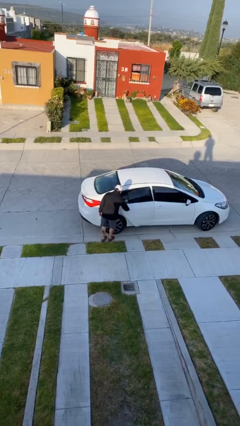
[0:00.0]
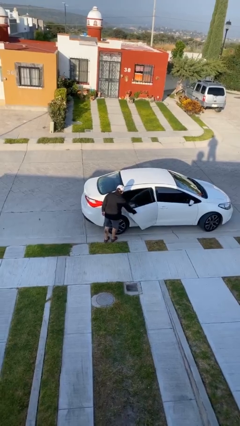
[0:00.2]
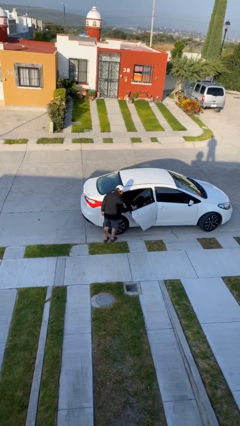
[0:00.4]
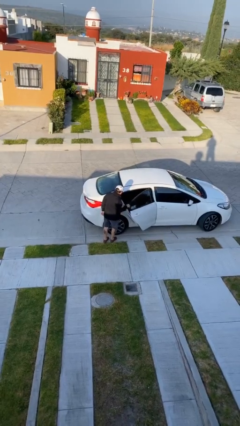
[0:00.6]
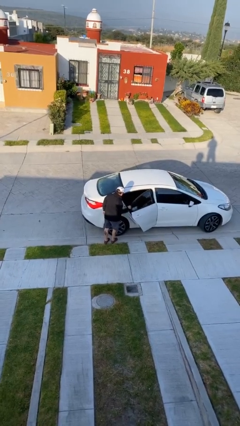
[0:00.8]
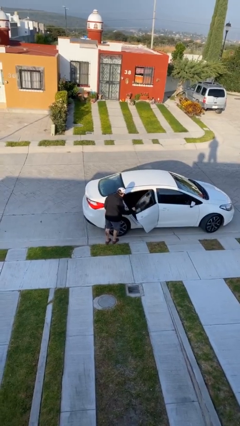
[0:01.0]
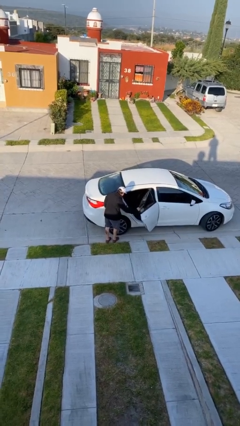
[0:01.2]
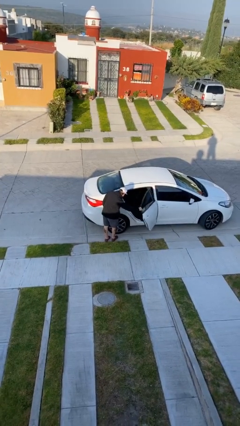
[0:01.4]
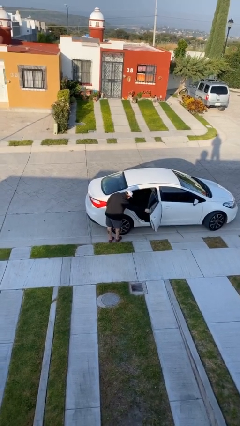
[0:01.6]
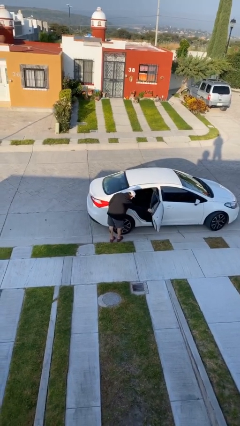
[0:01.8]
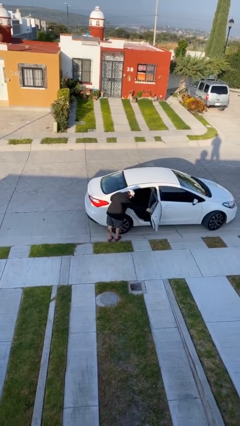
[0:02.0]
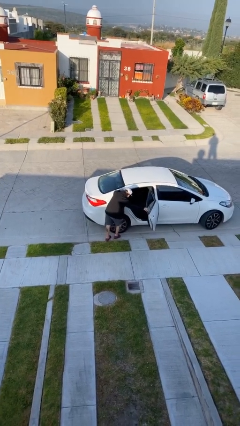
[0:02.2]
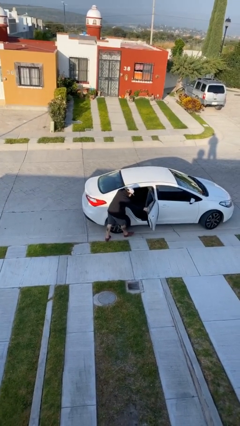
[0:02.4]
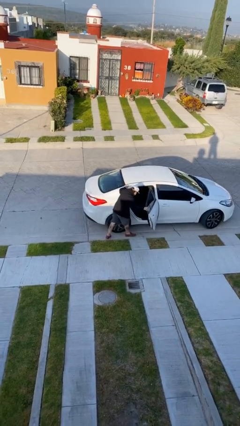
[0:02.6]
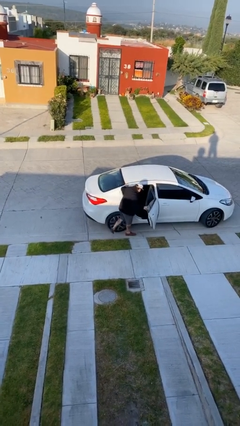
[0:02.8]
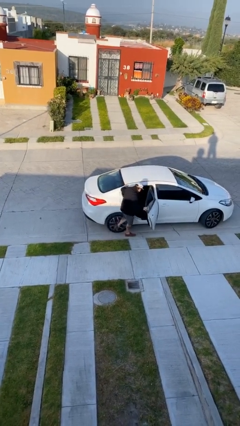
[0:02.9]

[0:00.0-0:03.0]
person opens car door

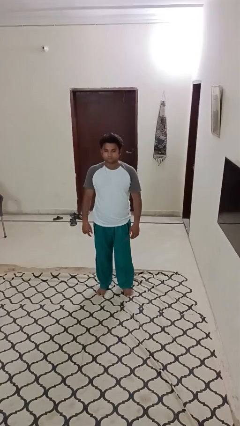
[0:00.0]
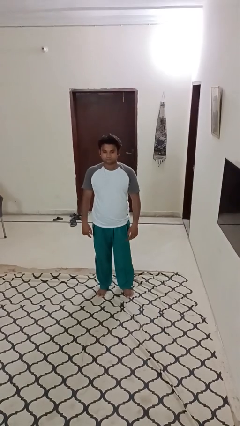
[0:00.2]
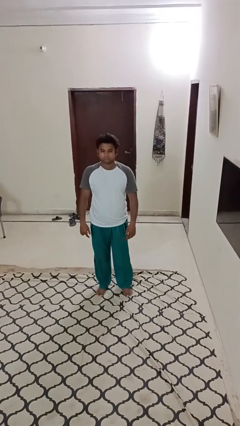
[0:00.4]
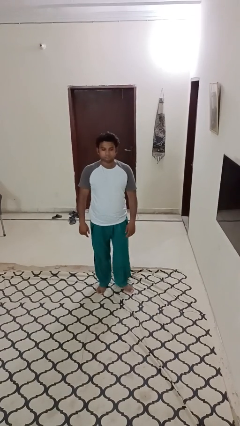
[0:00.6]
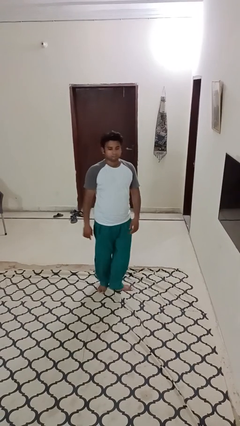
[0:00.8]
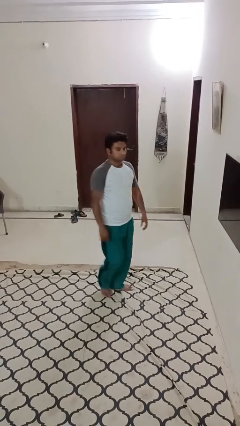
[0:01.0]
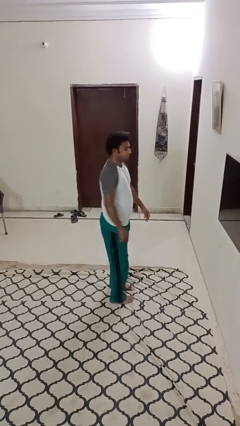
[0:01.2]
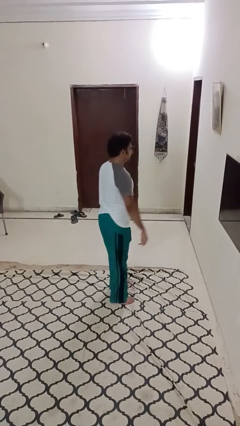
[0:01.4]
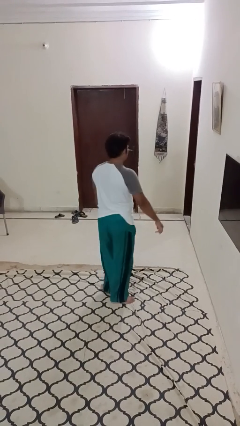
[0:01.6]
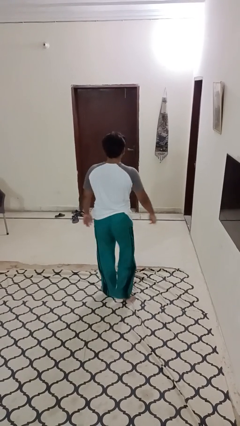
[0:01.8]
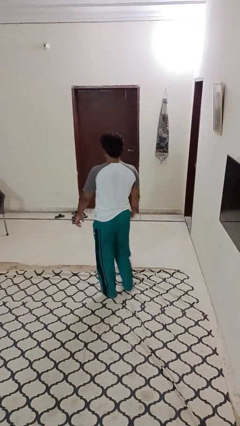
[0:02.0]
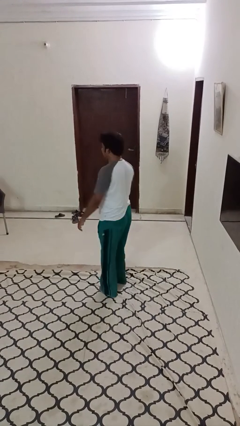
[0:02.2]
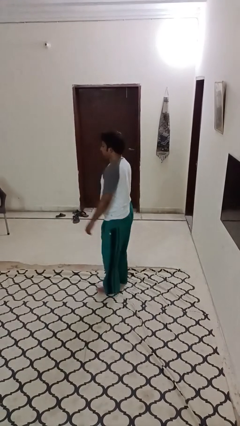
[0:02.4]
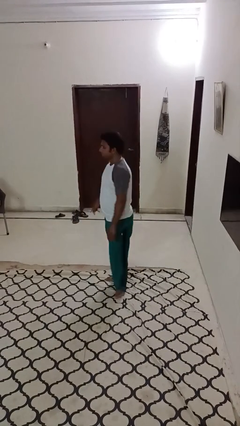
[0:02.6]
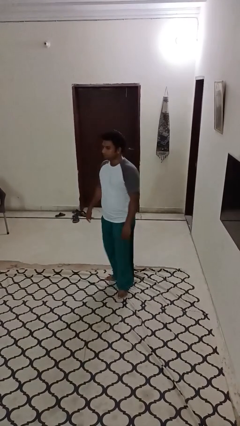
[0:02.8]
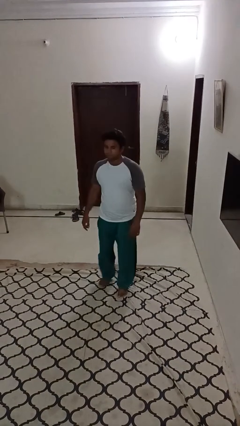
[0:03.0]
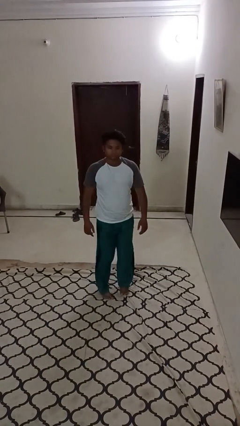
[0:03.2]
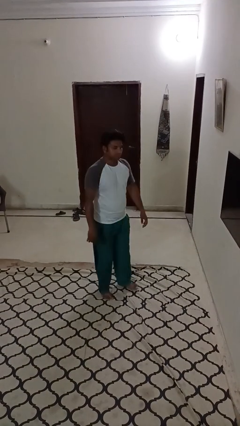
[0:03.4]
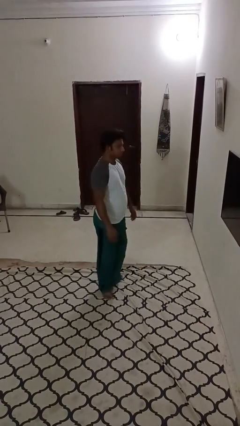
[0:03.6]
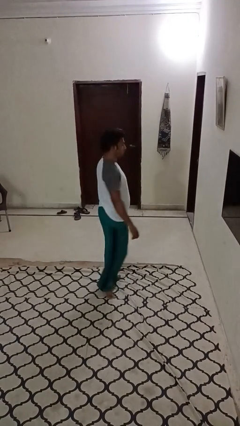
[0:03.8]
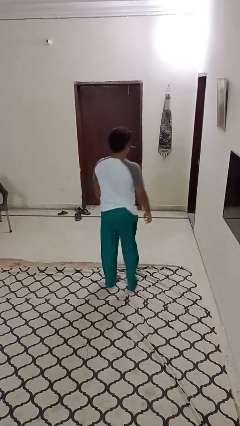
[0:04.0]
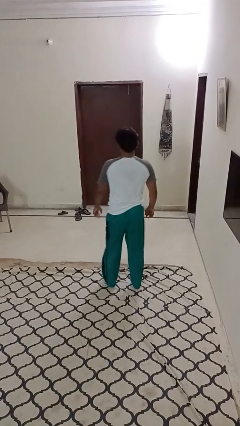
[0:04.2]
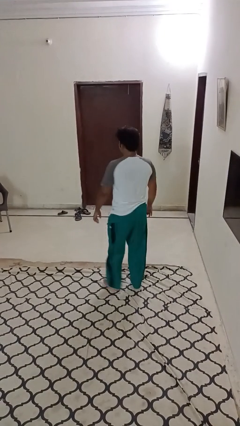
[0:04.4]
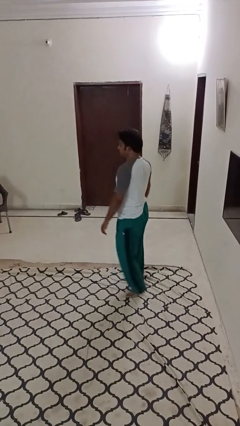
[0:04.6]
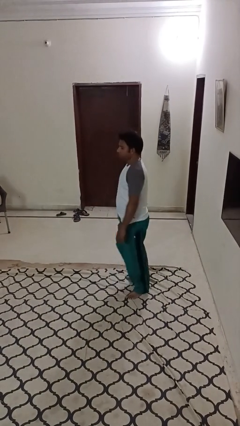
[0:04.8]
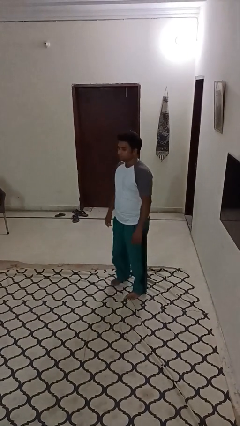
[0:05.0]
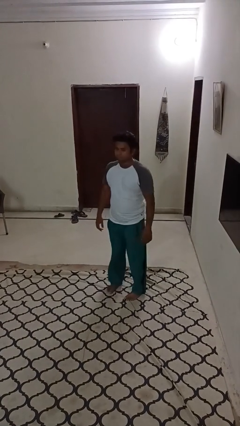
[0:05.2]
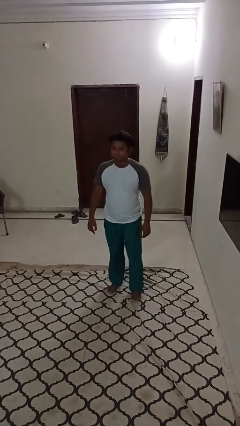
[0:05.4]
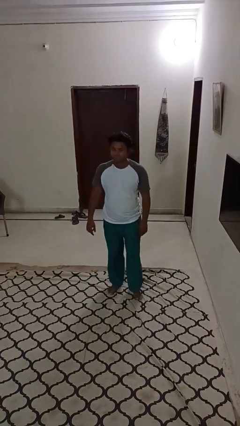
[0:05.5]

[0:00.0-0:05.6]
person twirls

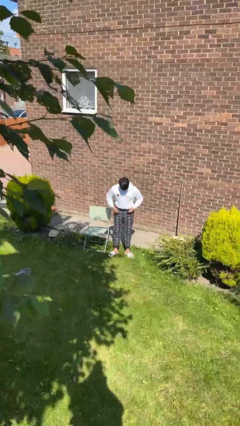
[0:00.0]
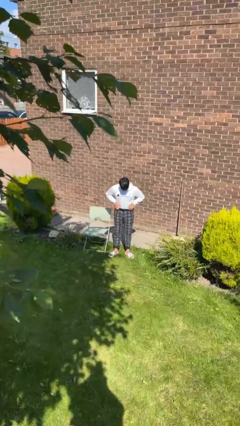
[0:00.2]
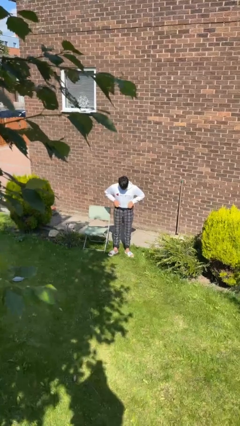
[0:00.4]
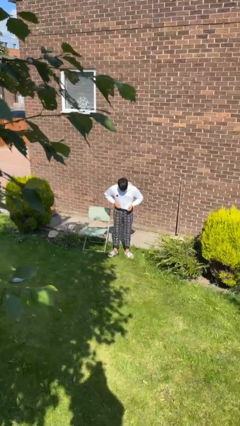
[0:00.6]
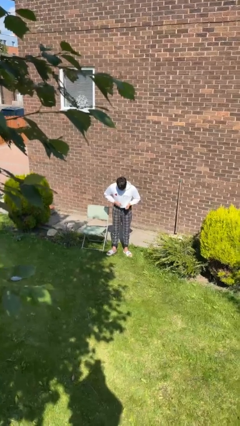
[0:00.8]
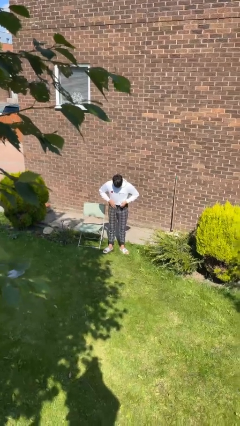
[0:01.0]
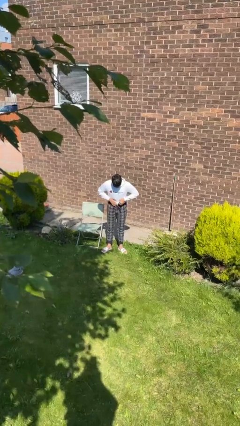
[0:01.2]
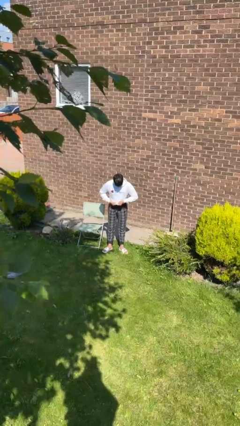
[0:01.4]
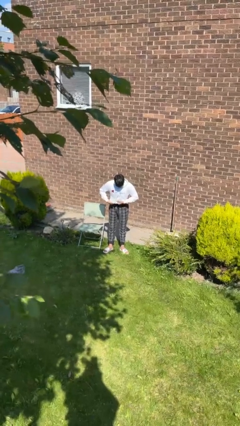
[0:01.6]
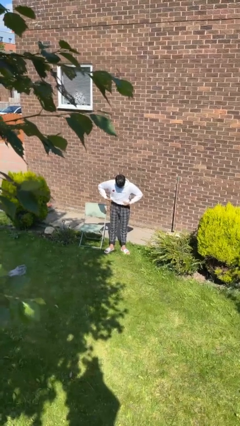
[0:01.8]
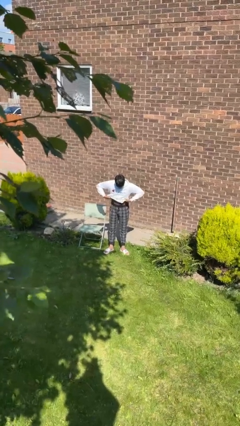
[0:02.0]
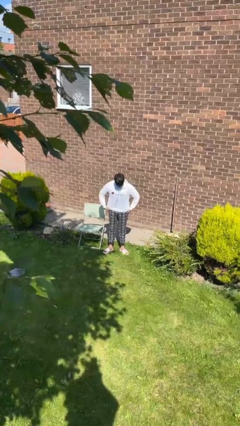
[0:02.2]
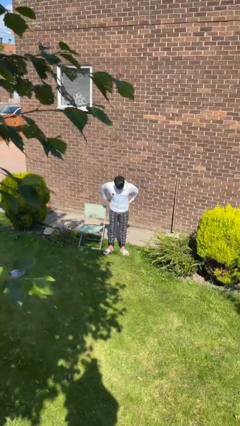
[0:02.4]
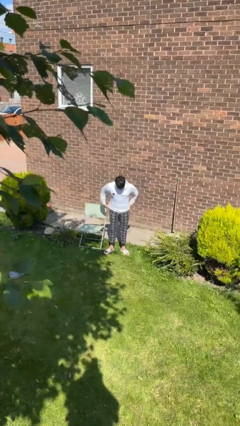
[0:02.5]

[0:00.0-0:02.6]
person untucks shirt

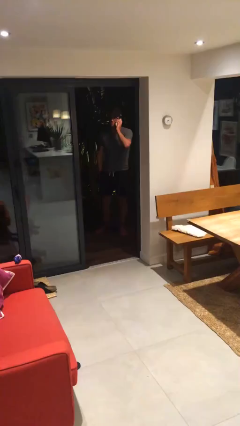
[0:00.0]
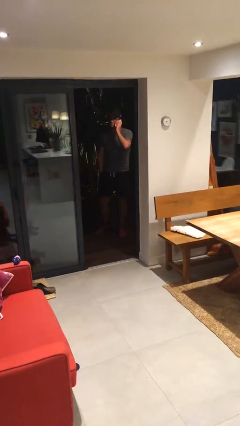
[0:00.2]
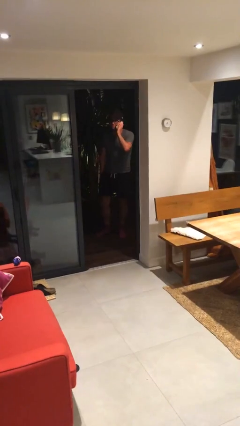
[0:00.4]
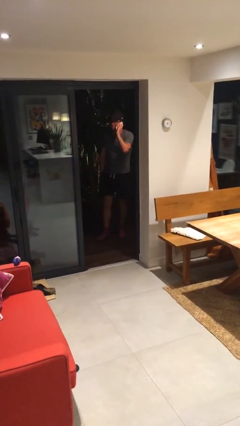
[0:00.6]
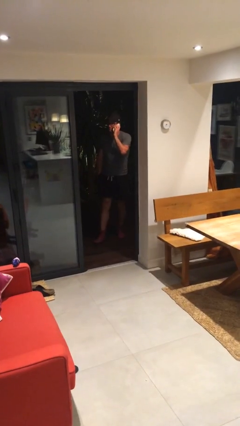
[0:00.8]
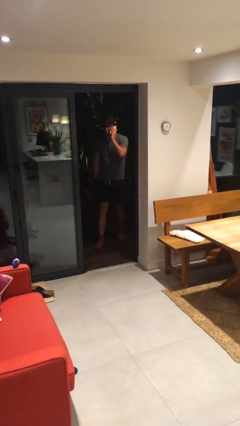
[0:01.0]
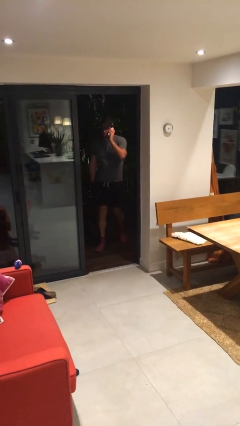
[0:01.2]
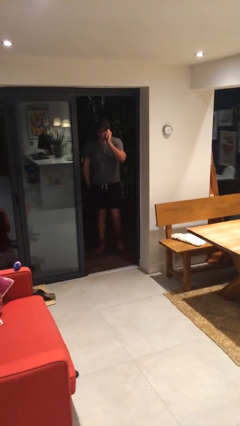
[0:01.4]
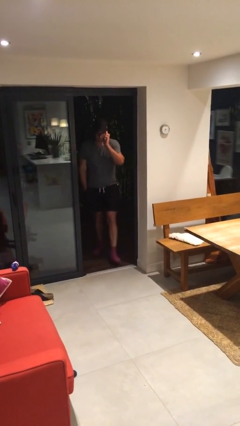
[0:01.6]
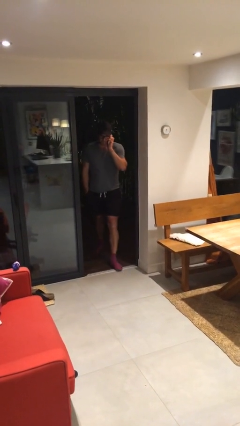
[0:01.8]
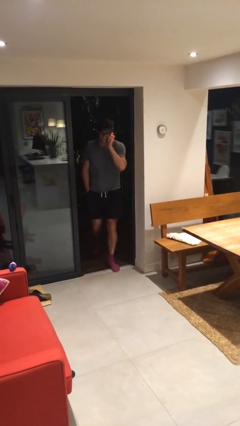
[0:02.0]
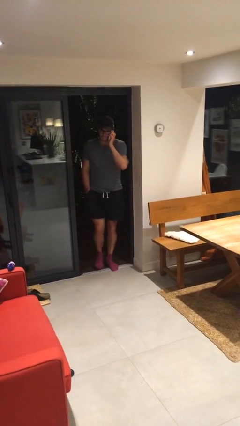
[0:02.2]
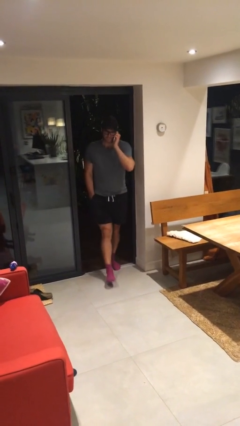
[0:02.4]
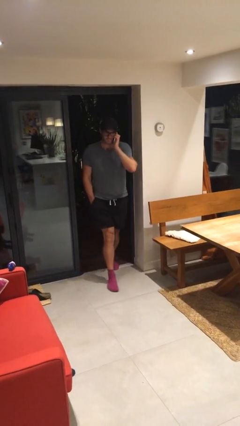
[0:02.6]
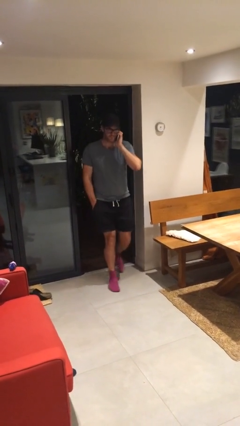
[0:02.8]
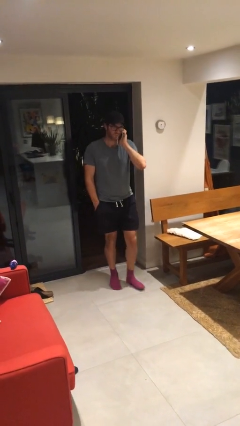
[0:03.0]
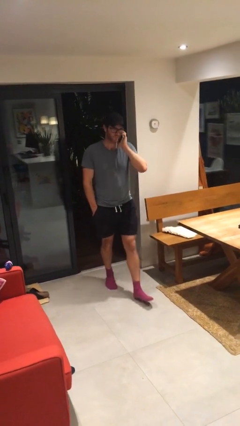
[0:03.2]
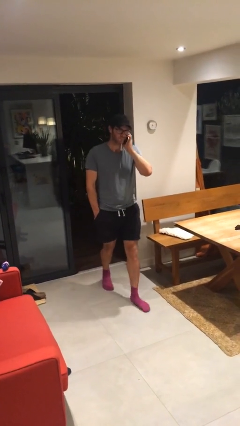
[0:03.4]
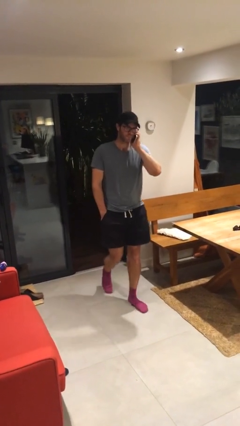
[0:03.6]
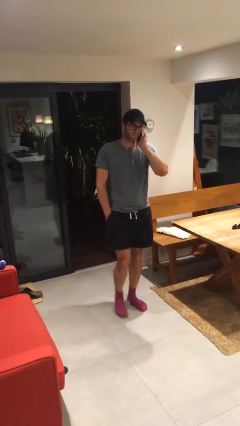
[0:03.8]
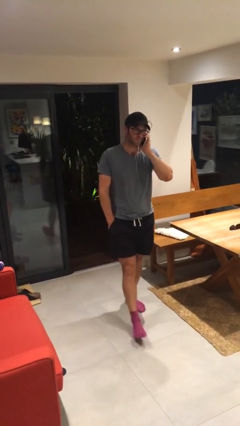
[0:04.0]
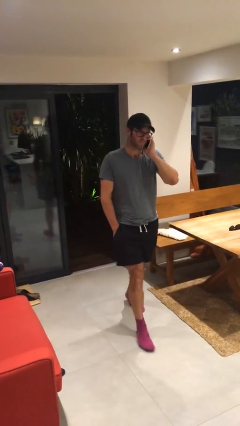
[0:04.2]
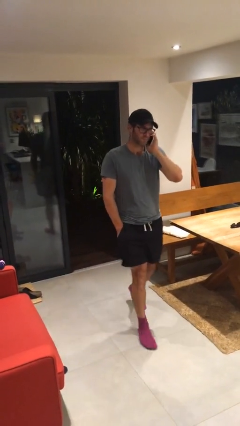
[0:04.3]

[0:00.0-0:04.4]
person enters scene through structure

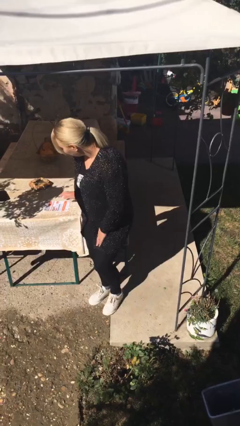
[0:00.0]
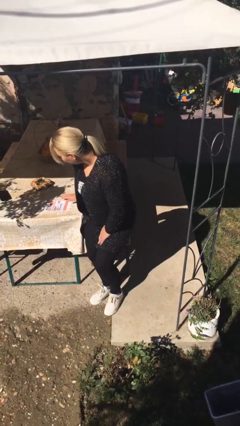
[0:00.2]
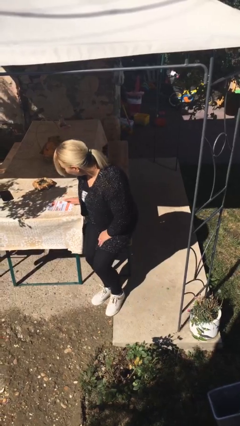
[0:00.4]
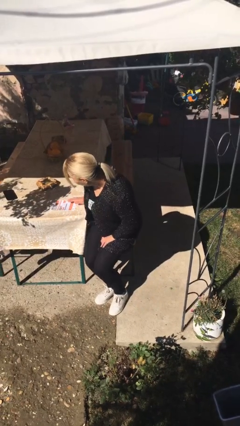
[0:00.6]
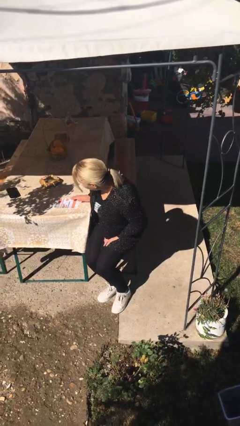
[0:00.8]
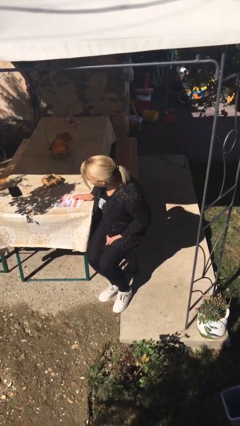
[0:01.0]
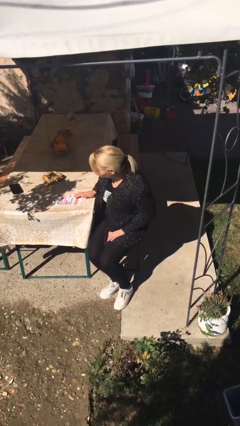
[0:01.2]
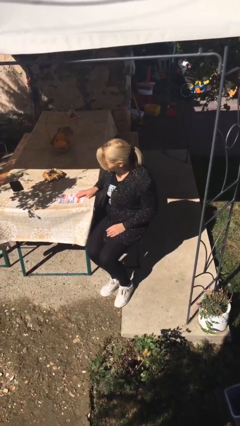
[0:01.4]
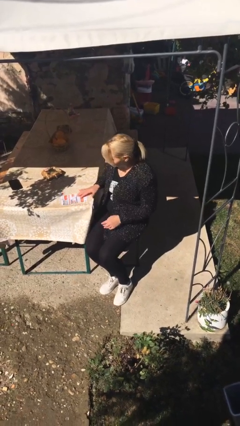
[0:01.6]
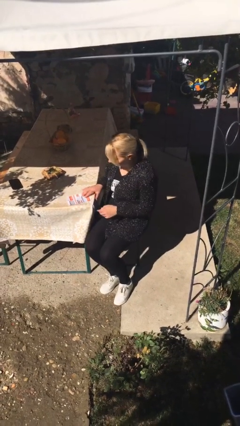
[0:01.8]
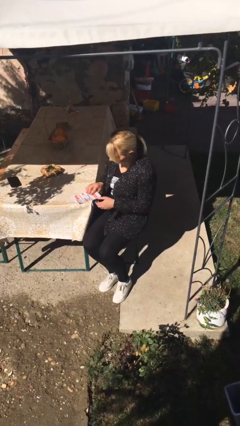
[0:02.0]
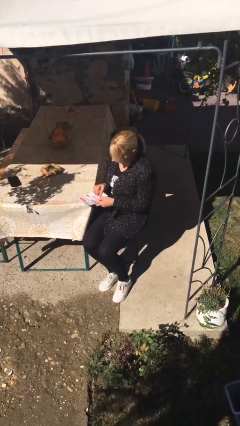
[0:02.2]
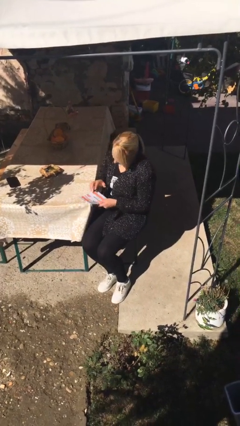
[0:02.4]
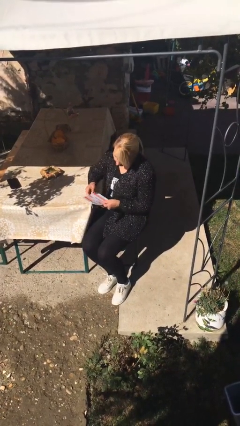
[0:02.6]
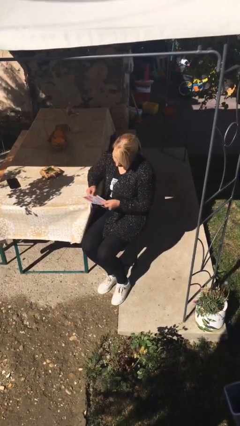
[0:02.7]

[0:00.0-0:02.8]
person sits down
